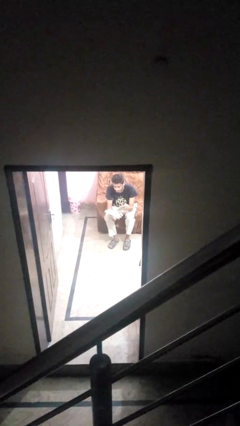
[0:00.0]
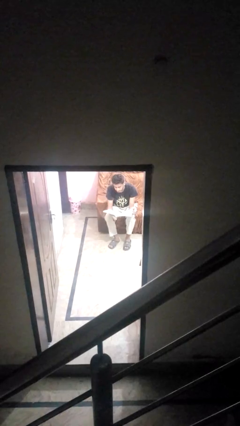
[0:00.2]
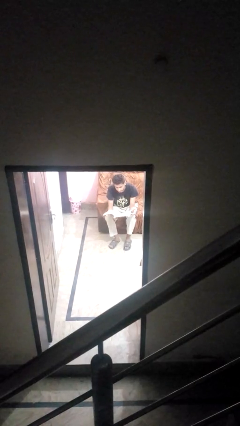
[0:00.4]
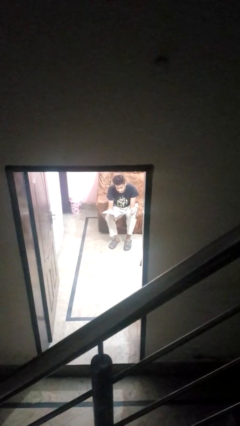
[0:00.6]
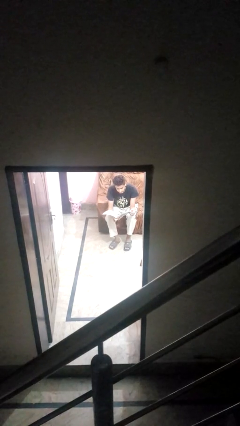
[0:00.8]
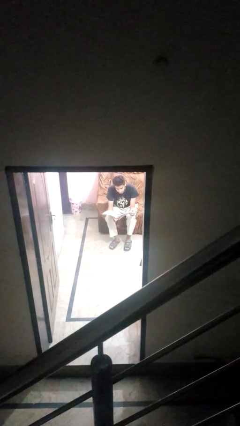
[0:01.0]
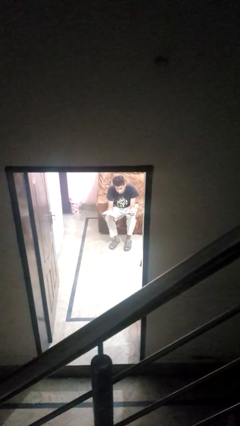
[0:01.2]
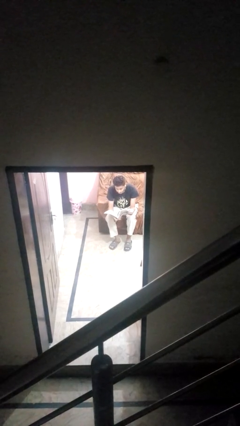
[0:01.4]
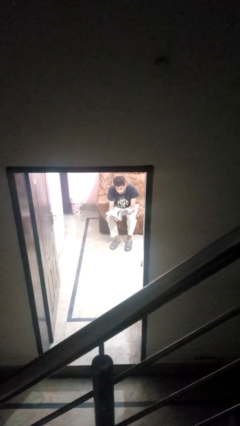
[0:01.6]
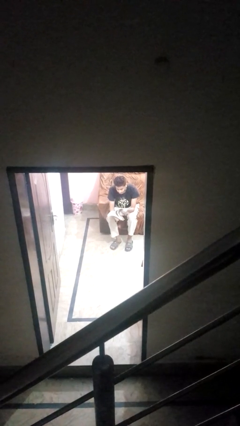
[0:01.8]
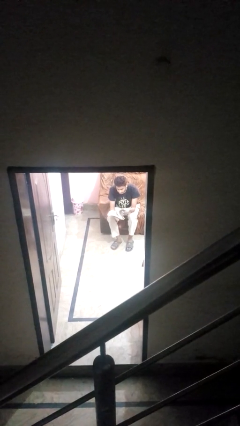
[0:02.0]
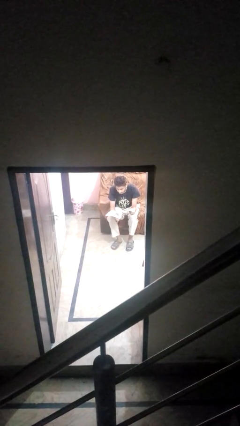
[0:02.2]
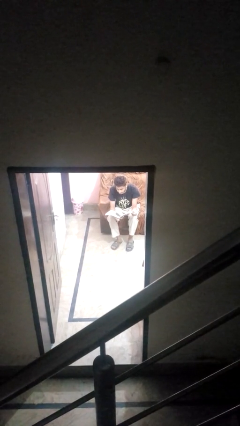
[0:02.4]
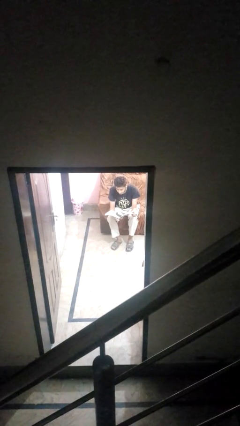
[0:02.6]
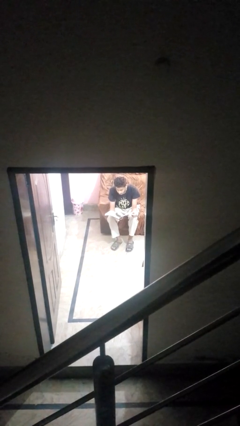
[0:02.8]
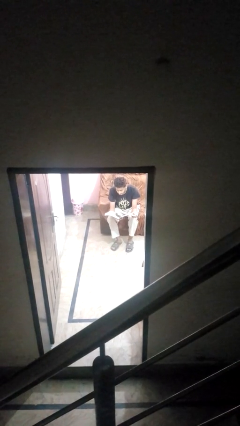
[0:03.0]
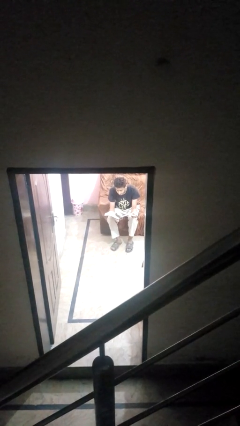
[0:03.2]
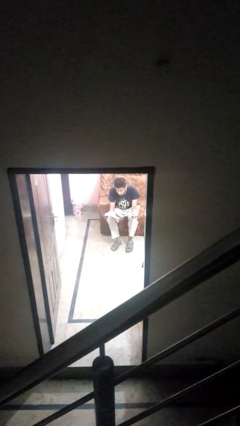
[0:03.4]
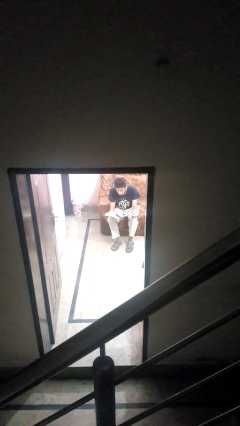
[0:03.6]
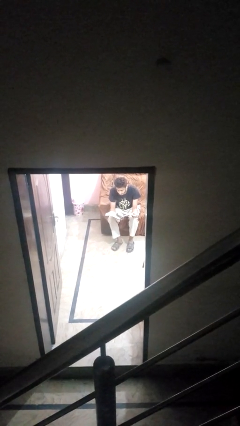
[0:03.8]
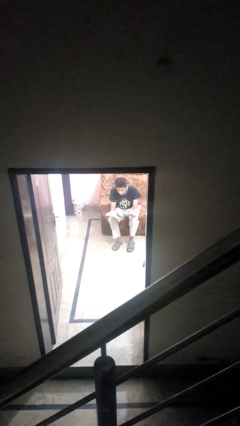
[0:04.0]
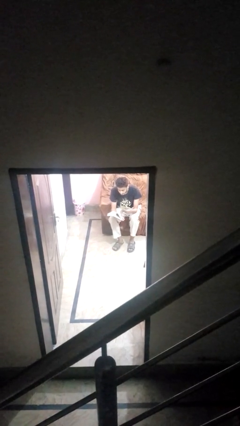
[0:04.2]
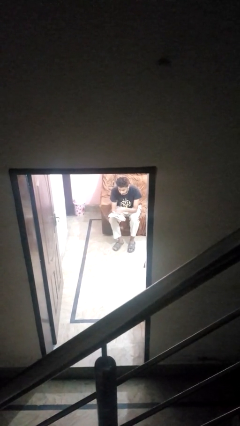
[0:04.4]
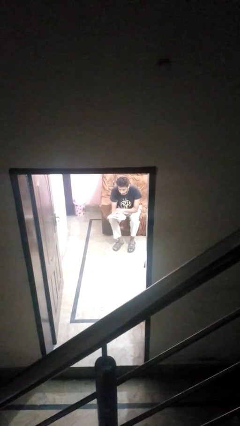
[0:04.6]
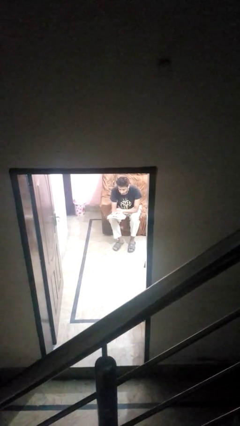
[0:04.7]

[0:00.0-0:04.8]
person reads magazine

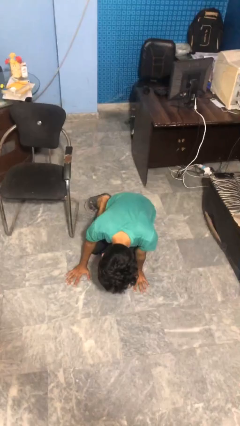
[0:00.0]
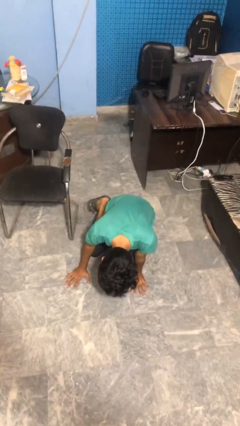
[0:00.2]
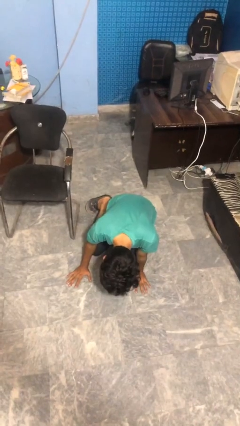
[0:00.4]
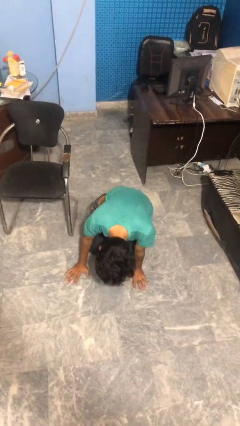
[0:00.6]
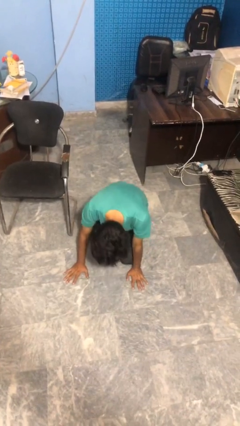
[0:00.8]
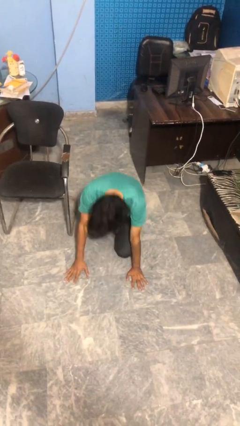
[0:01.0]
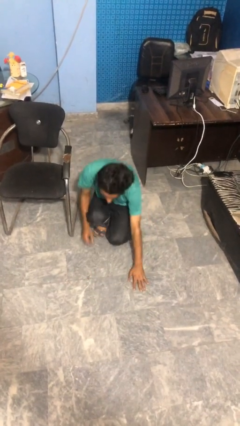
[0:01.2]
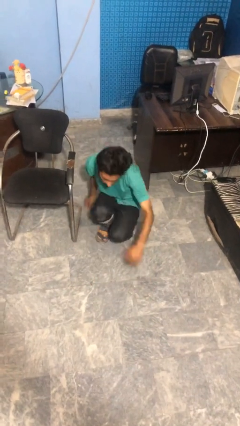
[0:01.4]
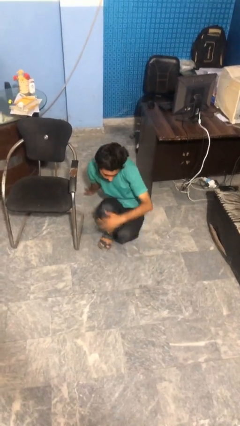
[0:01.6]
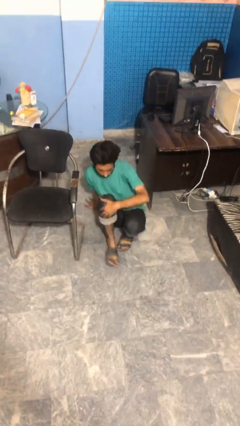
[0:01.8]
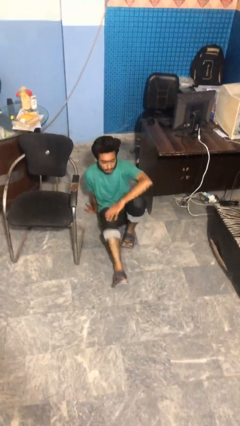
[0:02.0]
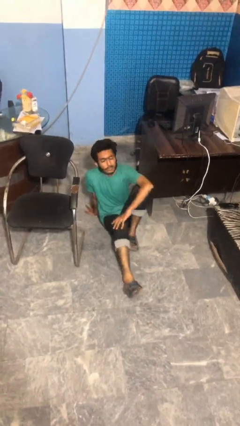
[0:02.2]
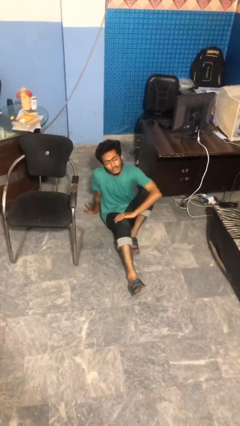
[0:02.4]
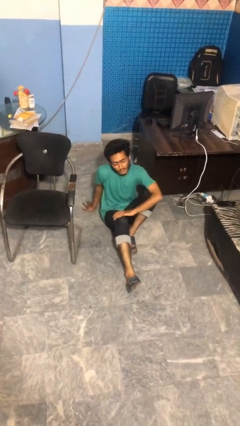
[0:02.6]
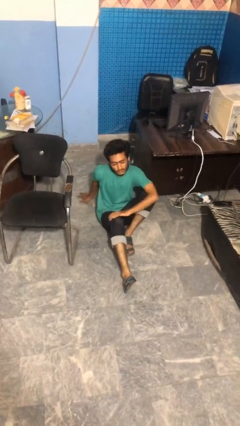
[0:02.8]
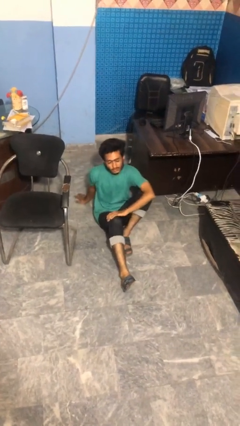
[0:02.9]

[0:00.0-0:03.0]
person lies down on floor

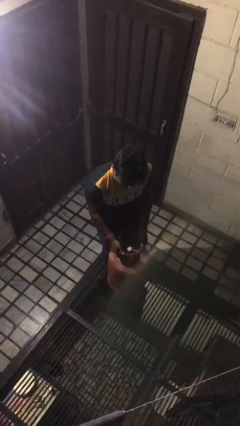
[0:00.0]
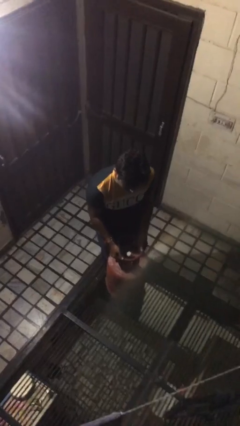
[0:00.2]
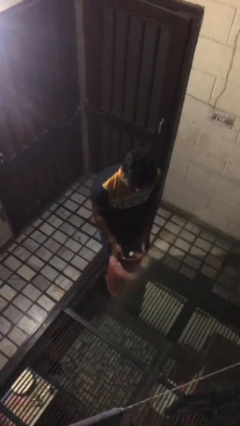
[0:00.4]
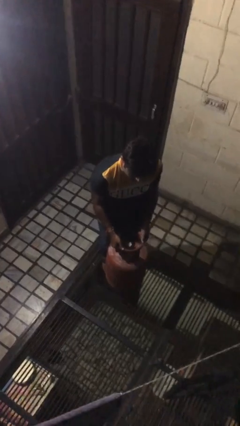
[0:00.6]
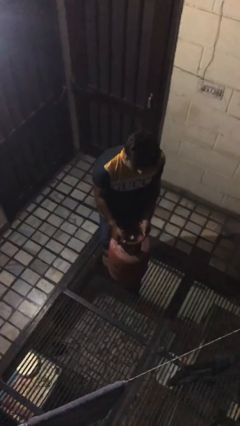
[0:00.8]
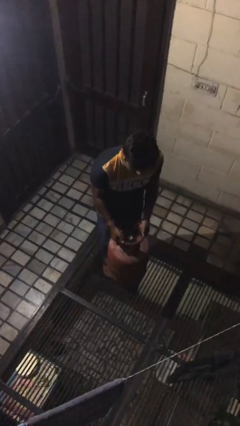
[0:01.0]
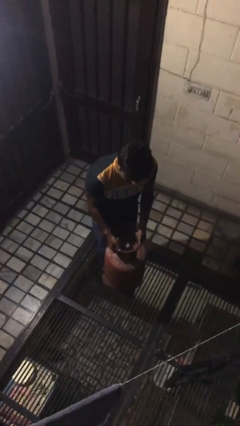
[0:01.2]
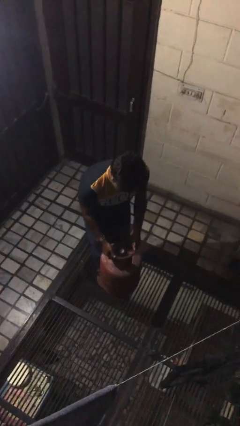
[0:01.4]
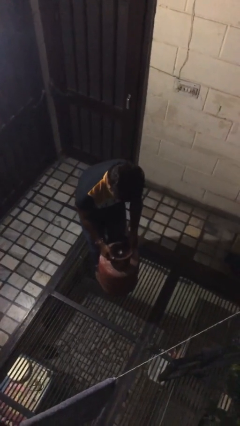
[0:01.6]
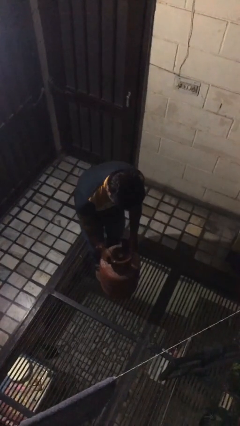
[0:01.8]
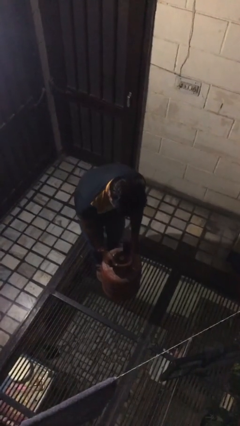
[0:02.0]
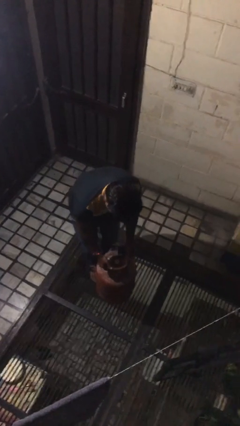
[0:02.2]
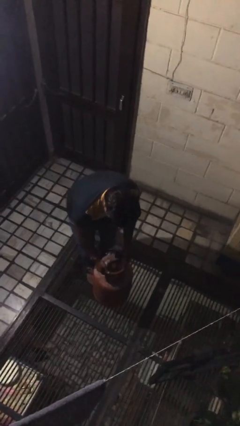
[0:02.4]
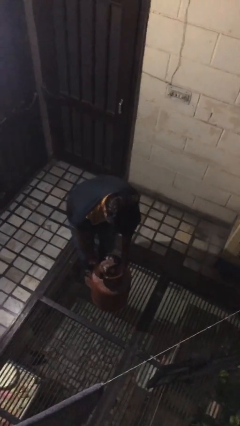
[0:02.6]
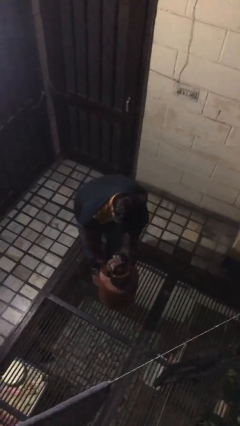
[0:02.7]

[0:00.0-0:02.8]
person puts down object on floor

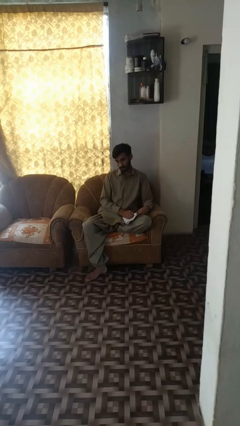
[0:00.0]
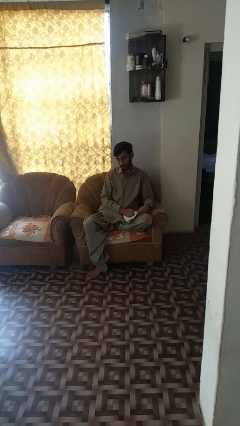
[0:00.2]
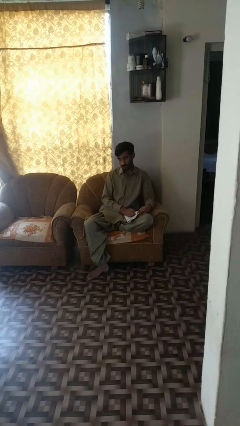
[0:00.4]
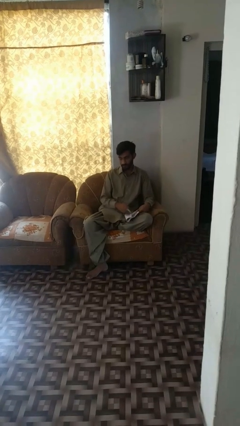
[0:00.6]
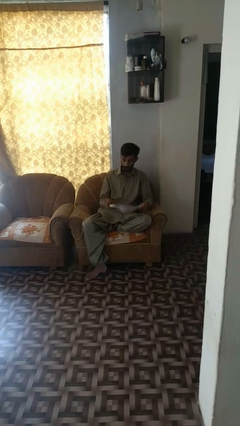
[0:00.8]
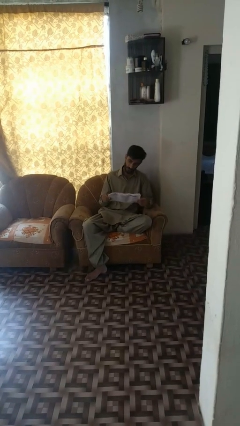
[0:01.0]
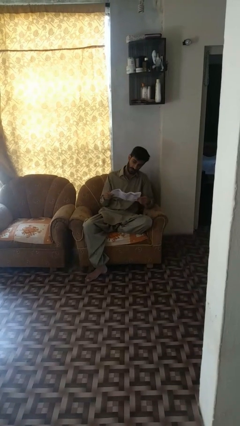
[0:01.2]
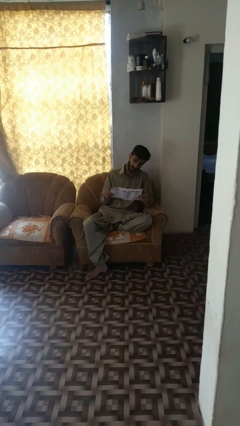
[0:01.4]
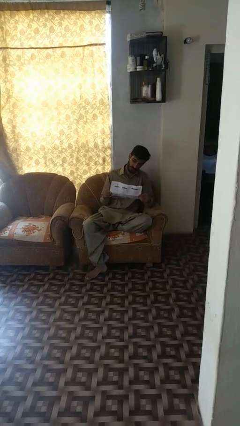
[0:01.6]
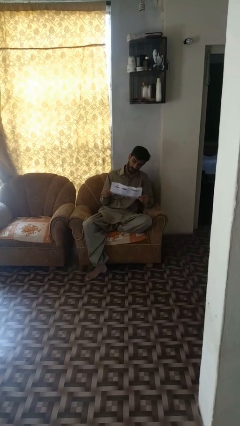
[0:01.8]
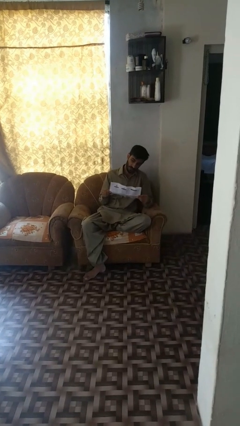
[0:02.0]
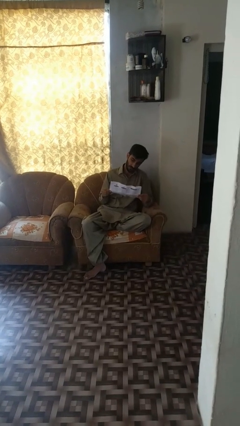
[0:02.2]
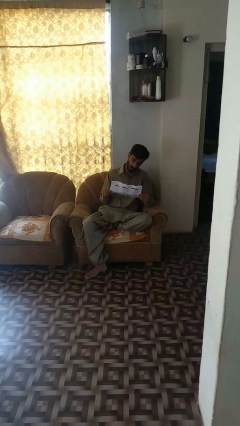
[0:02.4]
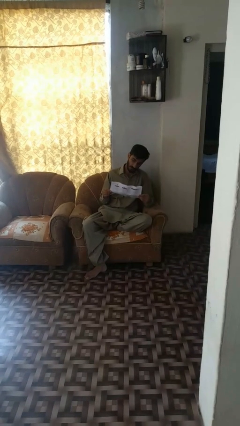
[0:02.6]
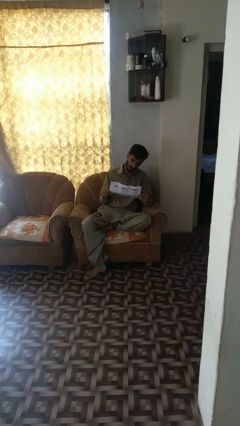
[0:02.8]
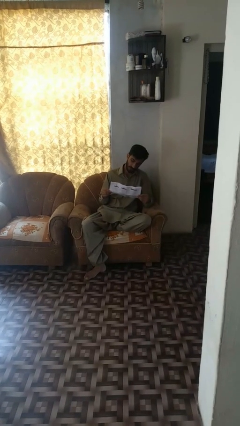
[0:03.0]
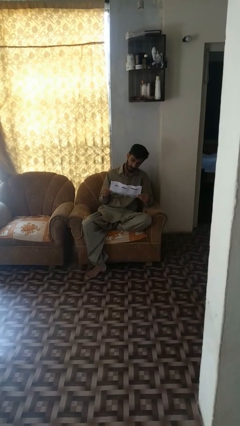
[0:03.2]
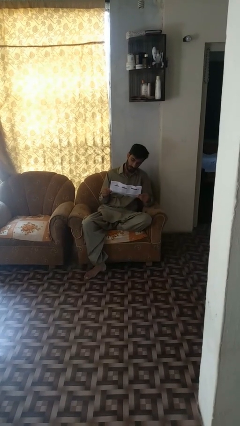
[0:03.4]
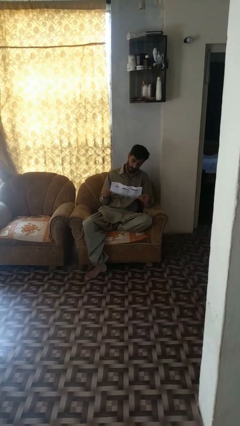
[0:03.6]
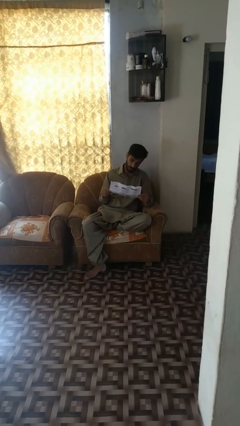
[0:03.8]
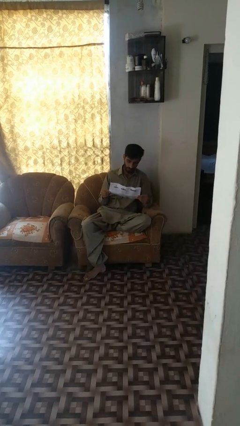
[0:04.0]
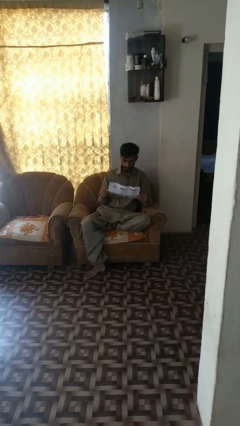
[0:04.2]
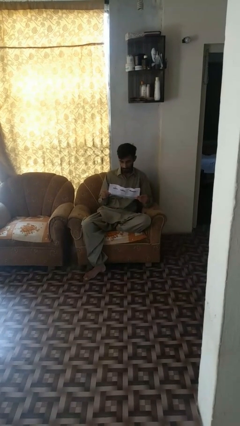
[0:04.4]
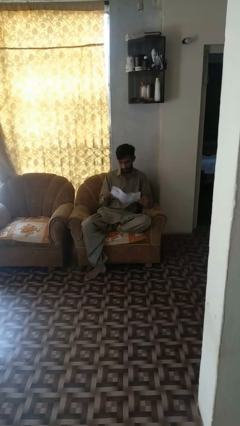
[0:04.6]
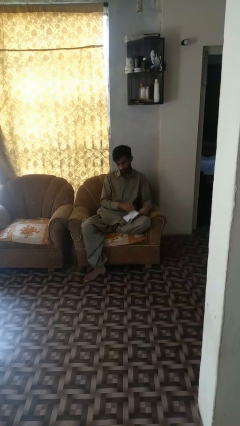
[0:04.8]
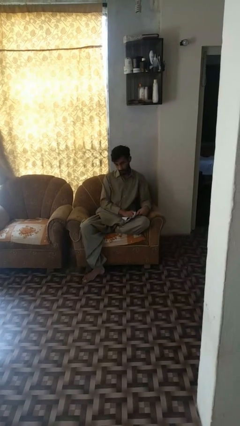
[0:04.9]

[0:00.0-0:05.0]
person reads newspaper

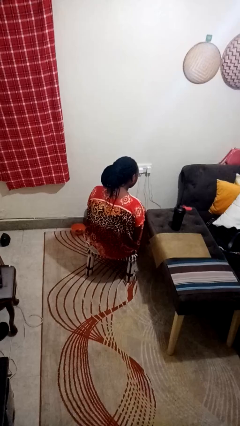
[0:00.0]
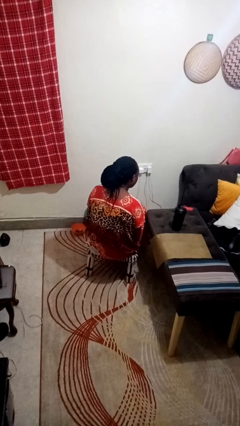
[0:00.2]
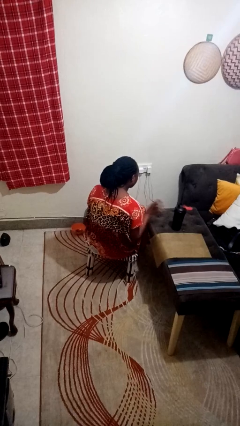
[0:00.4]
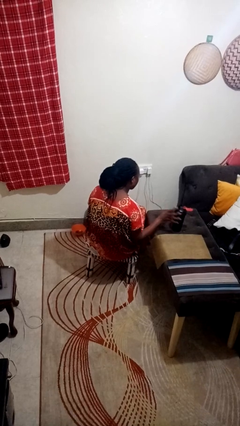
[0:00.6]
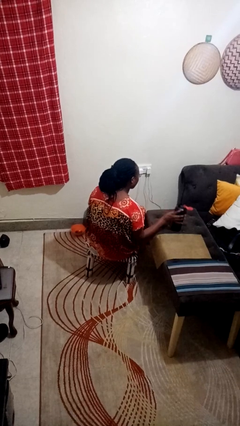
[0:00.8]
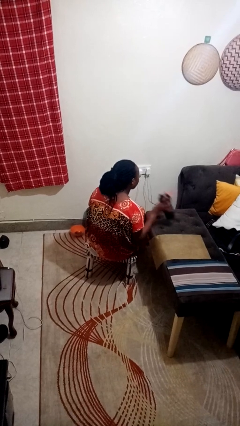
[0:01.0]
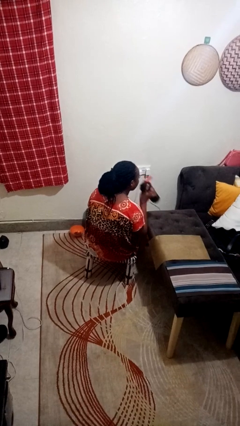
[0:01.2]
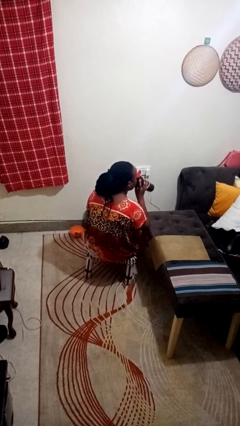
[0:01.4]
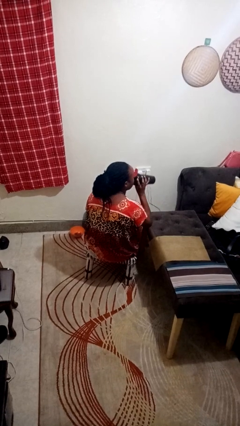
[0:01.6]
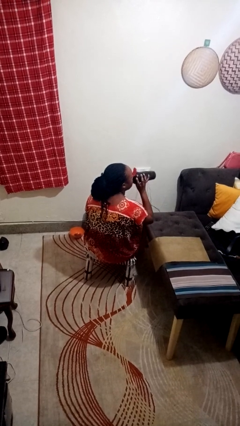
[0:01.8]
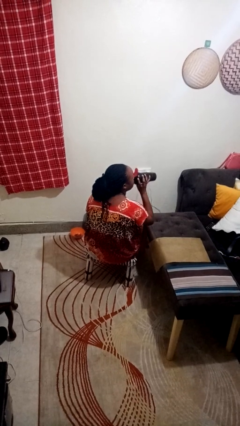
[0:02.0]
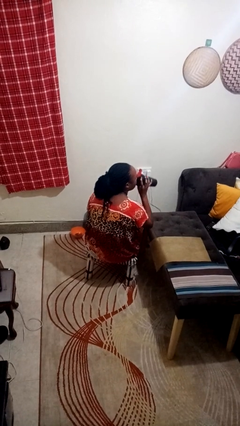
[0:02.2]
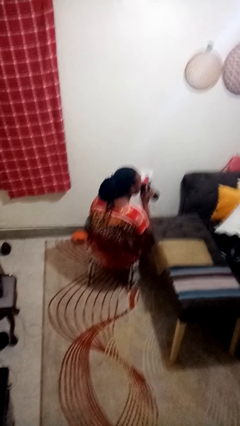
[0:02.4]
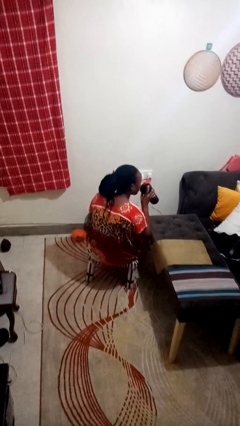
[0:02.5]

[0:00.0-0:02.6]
person drinks from cup
